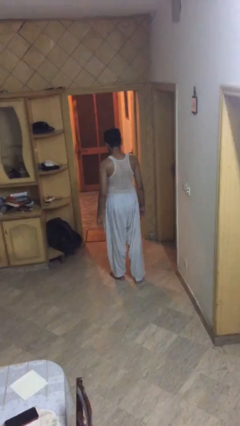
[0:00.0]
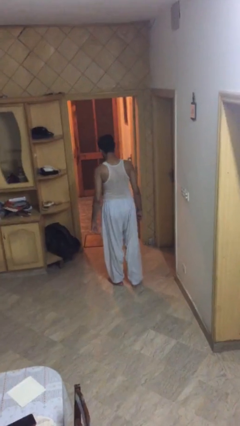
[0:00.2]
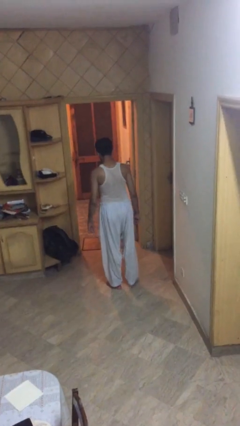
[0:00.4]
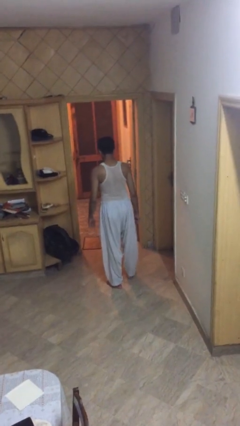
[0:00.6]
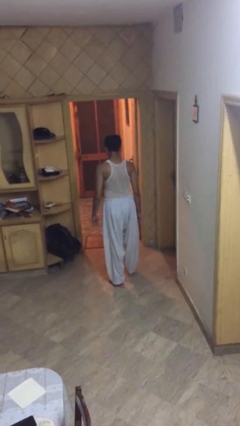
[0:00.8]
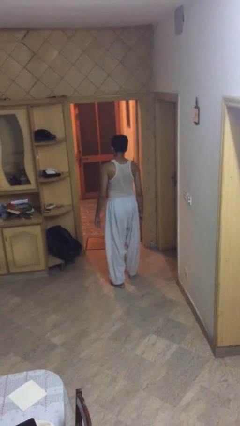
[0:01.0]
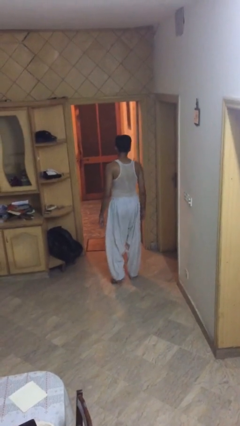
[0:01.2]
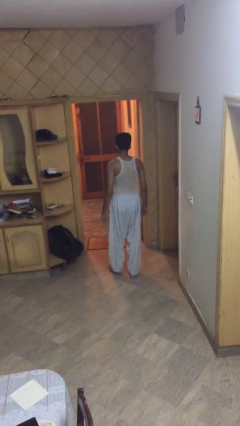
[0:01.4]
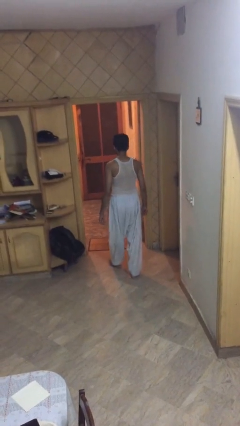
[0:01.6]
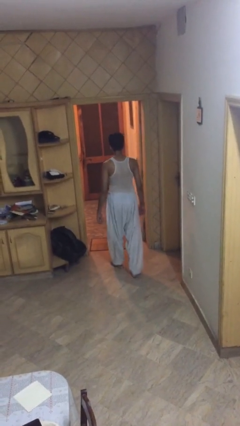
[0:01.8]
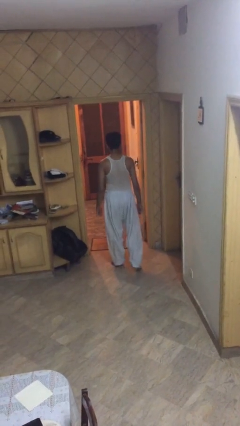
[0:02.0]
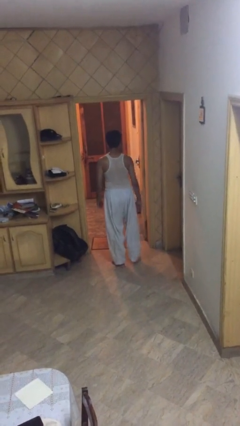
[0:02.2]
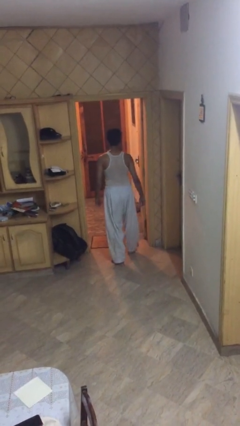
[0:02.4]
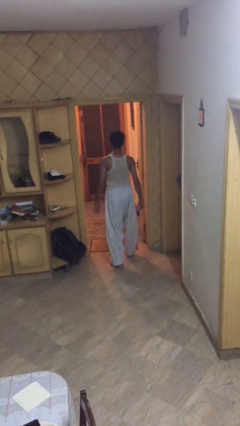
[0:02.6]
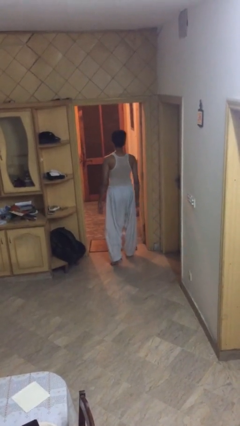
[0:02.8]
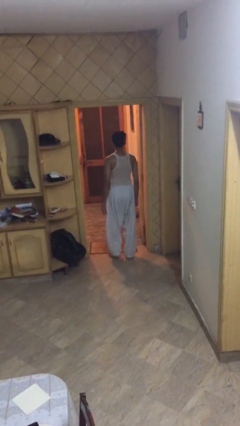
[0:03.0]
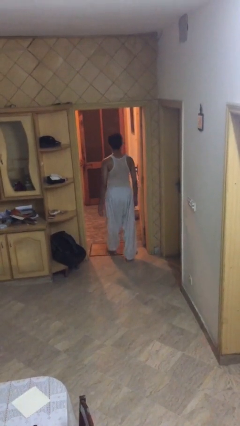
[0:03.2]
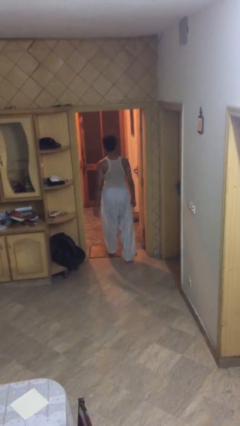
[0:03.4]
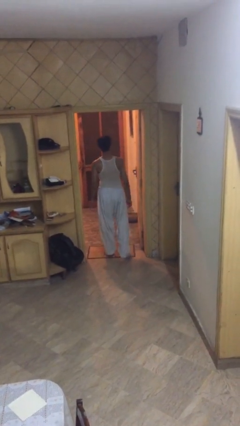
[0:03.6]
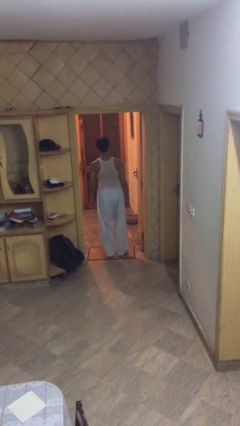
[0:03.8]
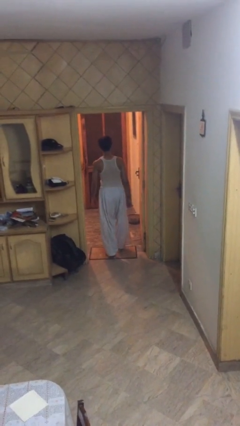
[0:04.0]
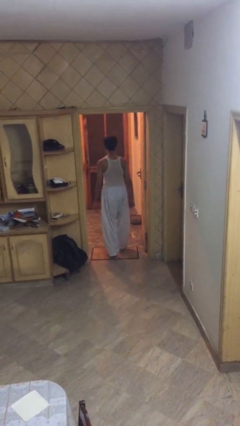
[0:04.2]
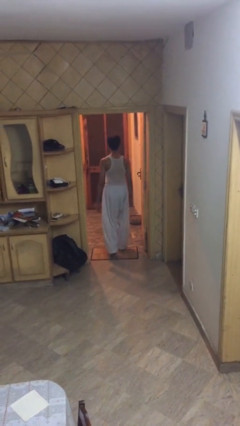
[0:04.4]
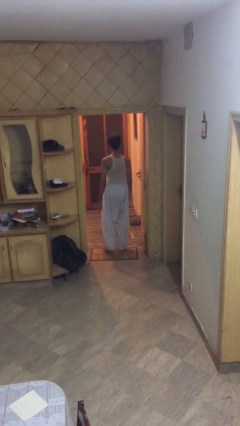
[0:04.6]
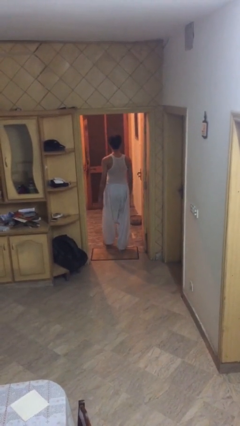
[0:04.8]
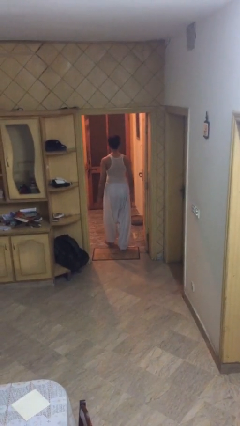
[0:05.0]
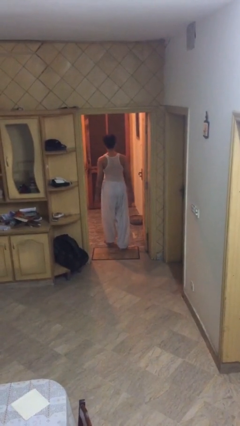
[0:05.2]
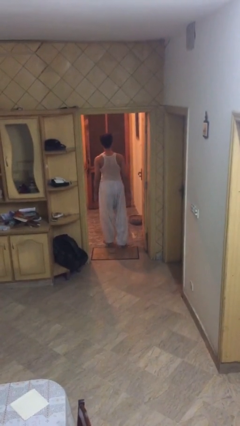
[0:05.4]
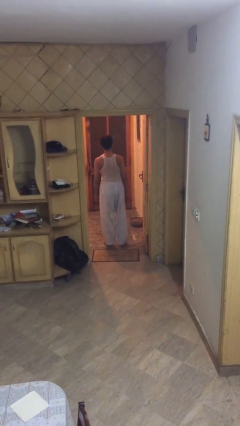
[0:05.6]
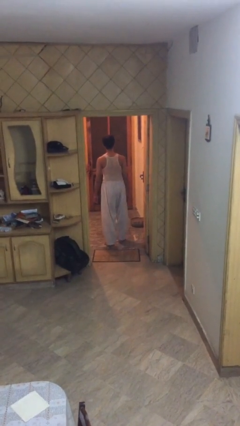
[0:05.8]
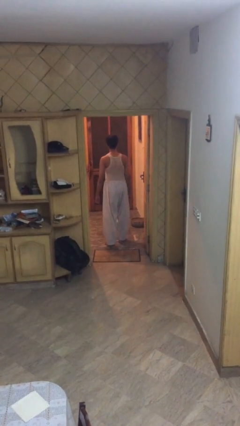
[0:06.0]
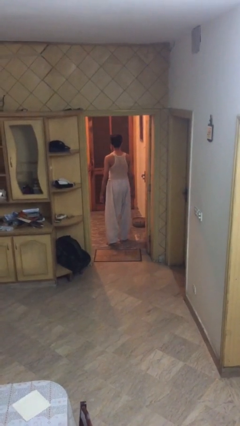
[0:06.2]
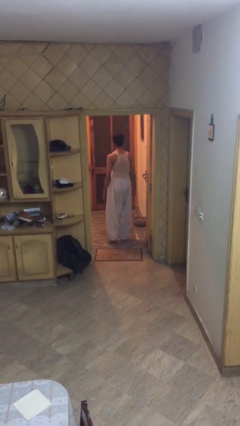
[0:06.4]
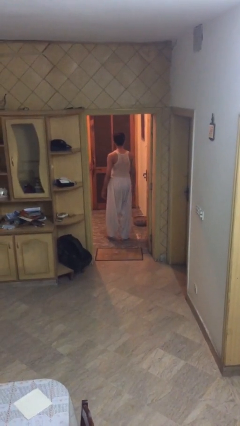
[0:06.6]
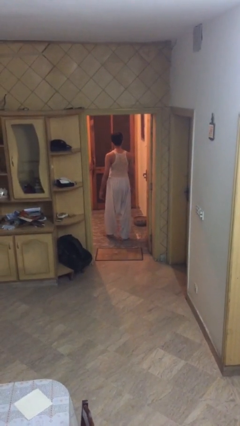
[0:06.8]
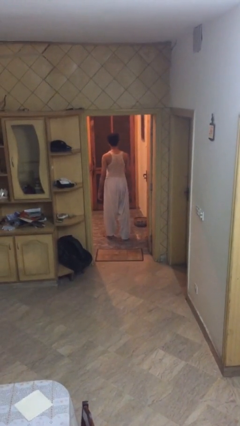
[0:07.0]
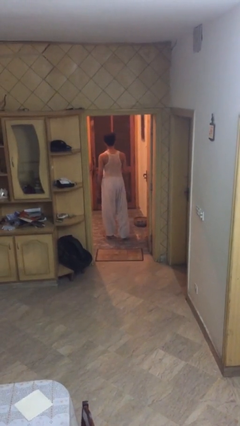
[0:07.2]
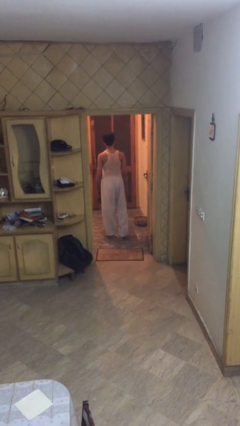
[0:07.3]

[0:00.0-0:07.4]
person exits scene through structure

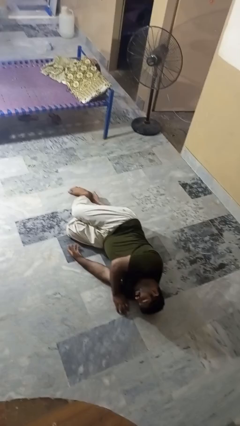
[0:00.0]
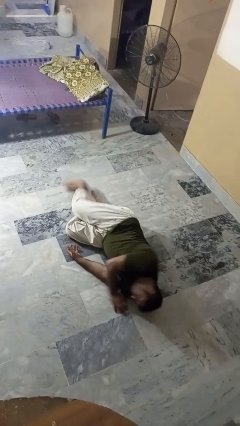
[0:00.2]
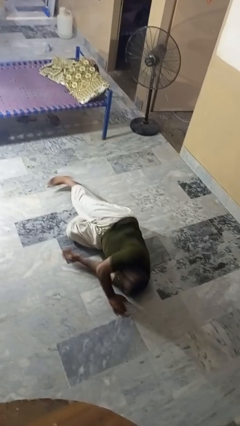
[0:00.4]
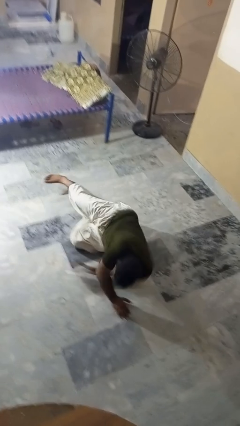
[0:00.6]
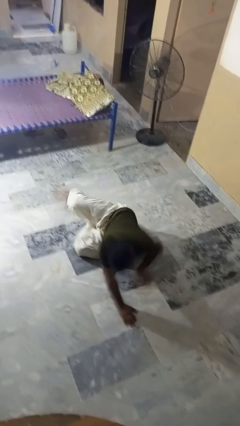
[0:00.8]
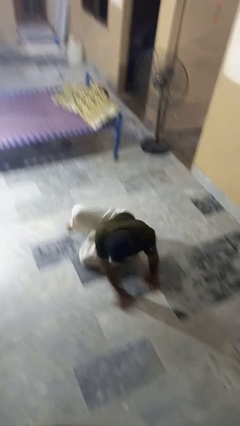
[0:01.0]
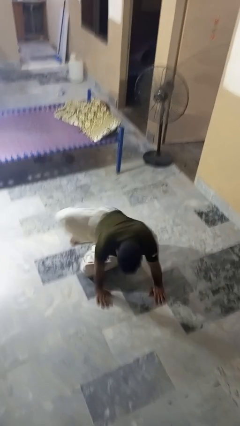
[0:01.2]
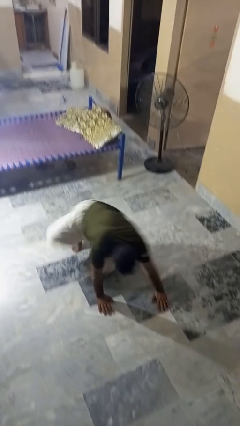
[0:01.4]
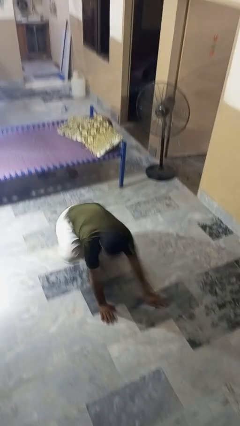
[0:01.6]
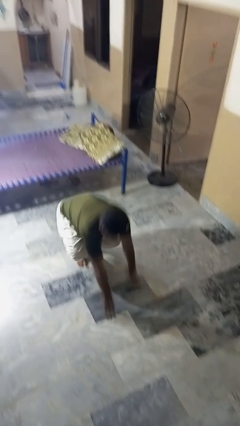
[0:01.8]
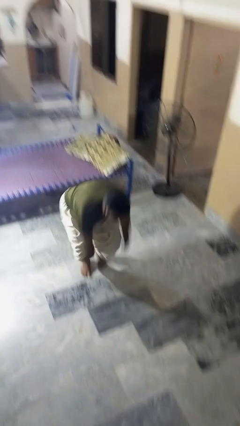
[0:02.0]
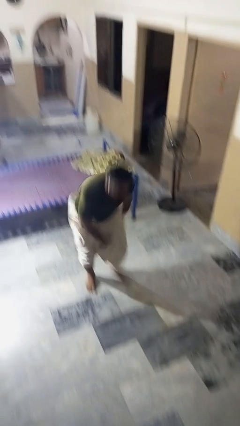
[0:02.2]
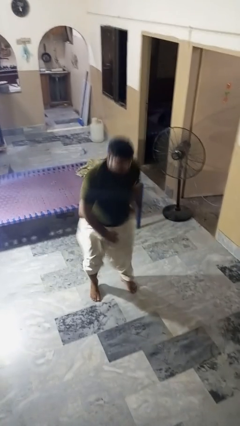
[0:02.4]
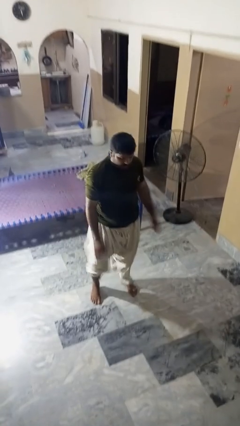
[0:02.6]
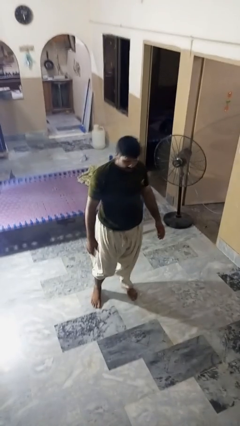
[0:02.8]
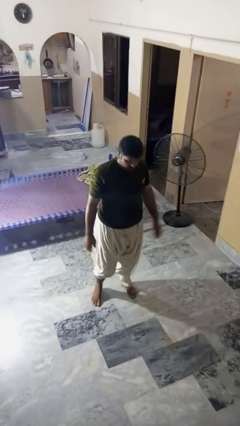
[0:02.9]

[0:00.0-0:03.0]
person stands up from floor

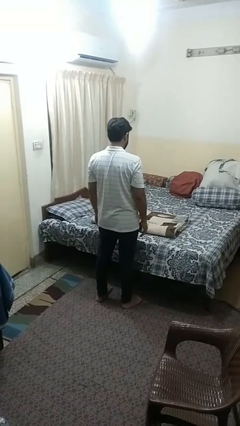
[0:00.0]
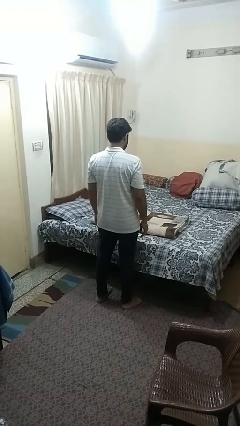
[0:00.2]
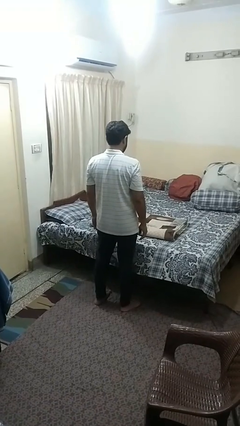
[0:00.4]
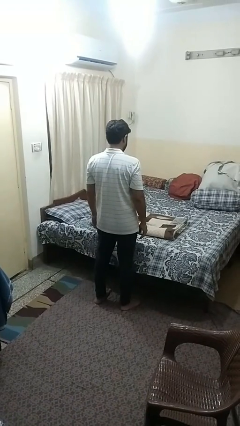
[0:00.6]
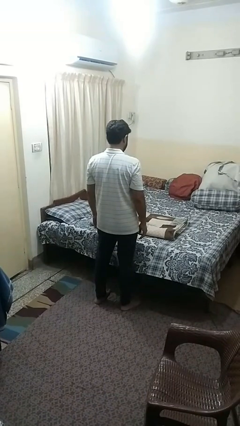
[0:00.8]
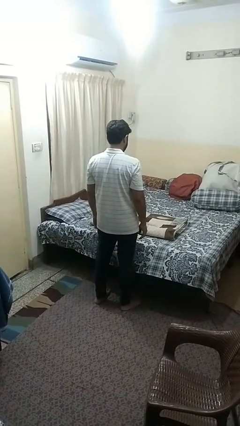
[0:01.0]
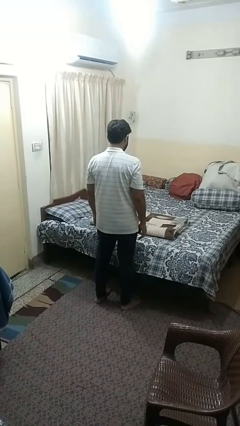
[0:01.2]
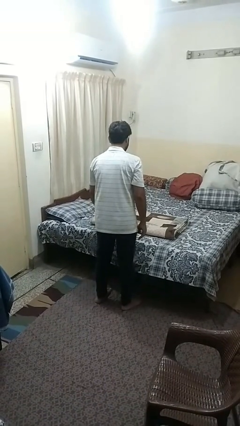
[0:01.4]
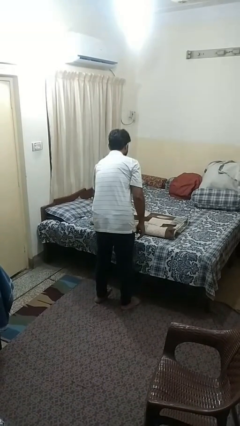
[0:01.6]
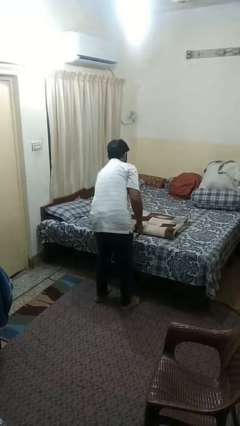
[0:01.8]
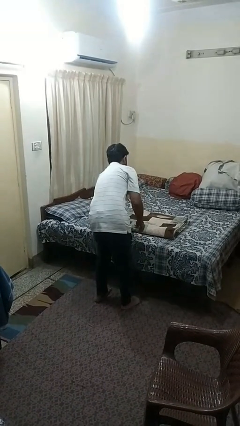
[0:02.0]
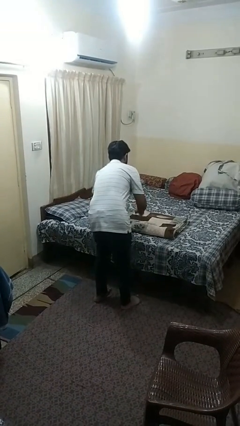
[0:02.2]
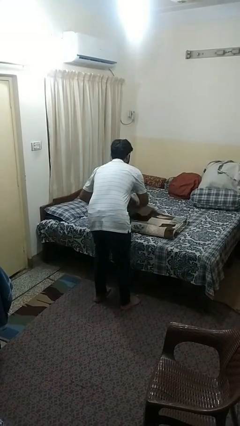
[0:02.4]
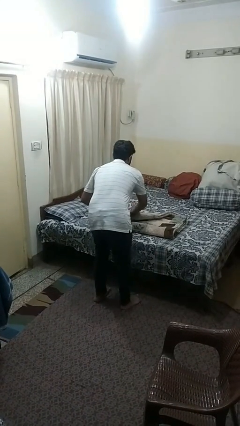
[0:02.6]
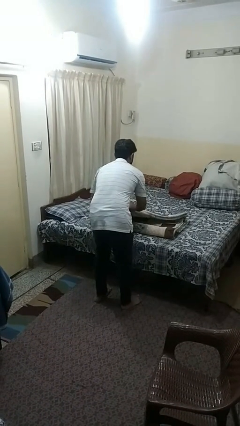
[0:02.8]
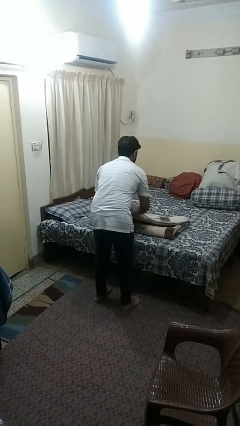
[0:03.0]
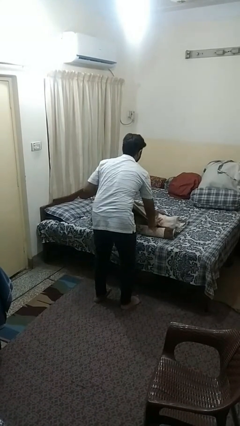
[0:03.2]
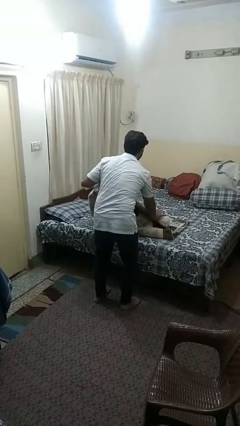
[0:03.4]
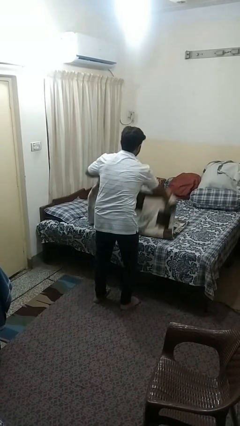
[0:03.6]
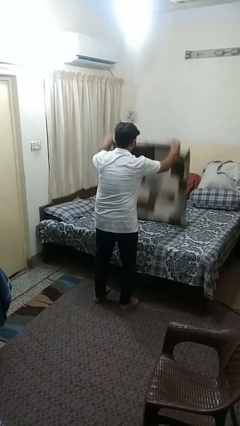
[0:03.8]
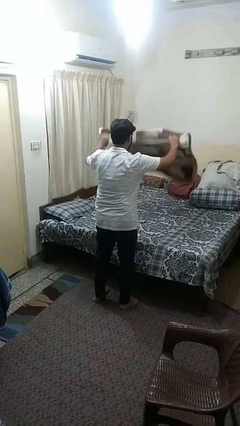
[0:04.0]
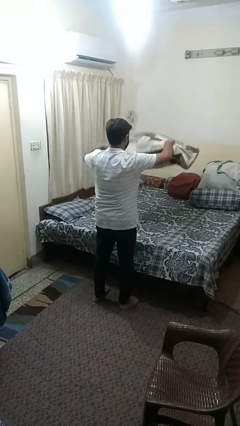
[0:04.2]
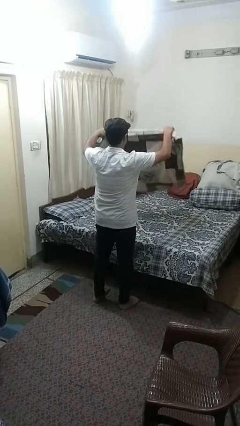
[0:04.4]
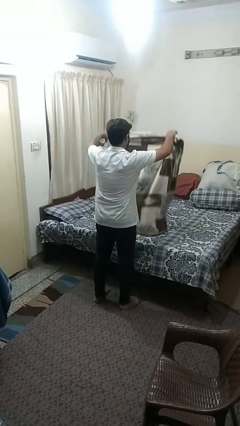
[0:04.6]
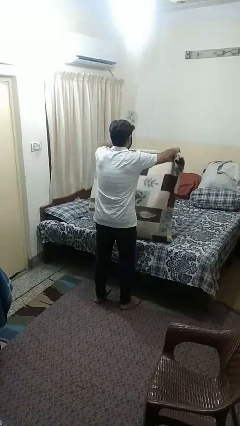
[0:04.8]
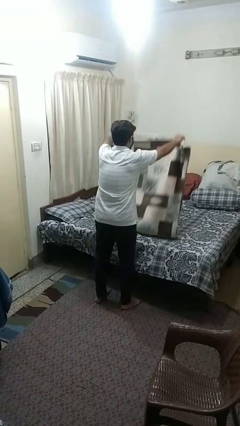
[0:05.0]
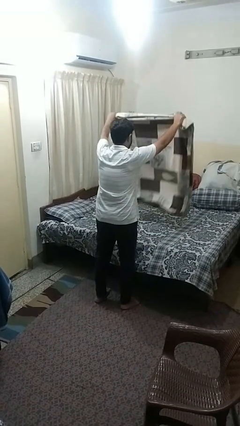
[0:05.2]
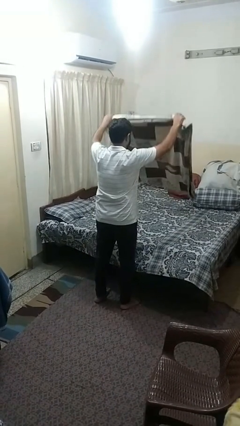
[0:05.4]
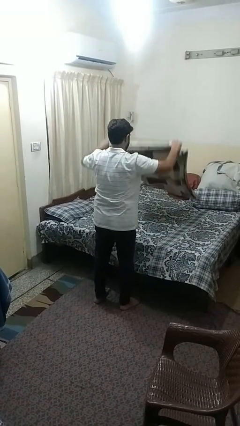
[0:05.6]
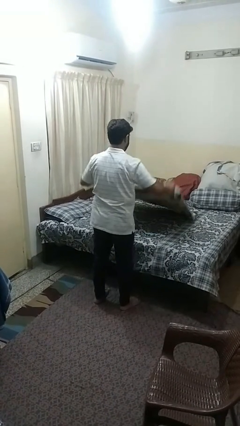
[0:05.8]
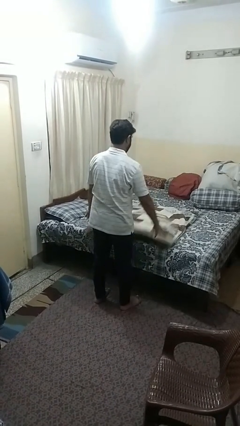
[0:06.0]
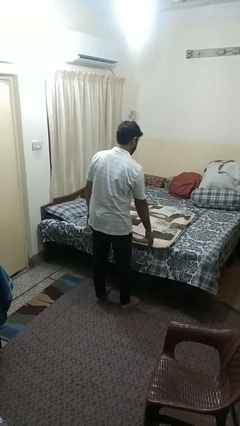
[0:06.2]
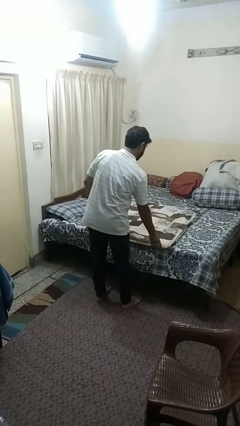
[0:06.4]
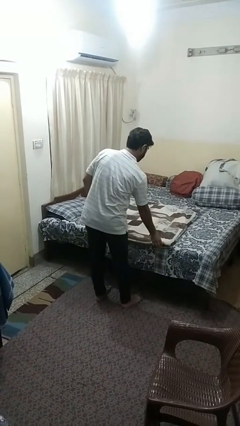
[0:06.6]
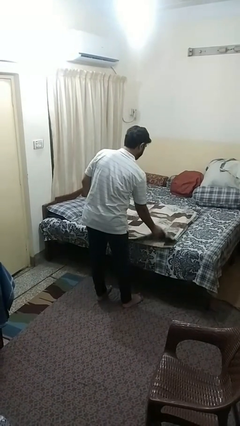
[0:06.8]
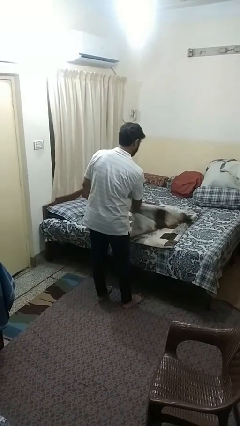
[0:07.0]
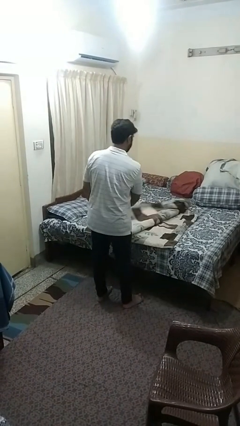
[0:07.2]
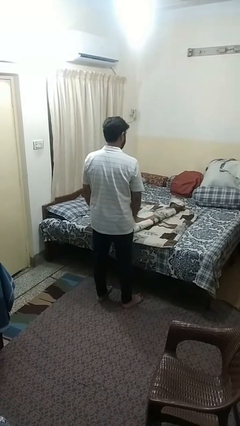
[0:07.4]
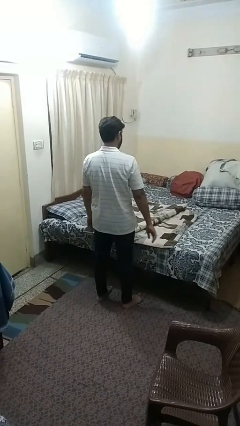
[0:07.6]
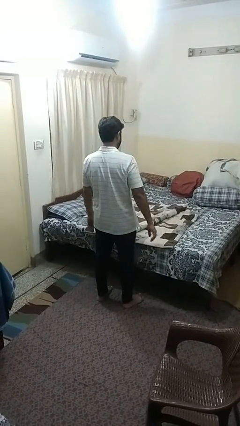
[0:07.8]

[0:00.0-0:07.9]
person unfolds blanket
